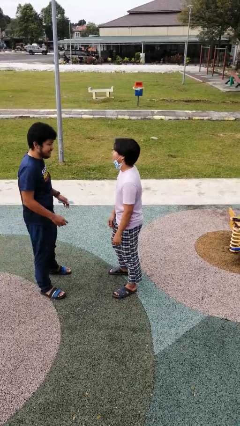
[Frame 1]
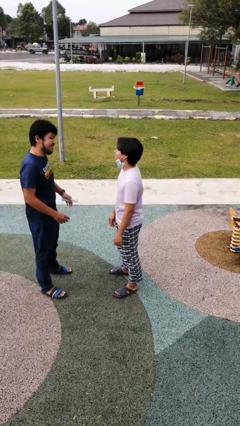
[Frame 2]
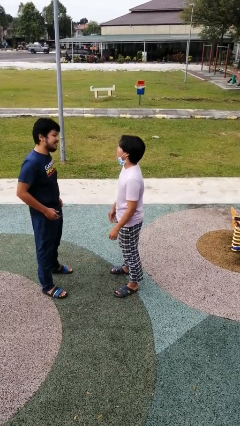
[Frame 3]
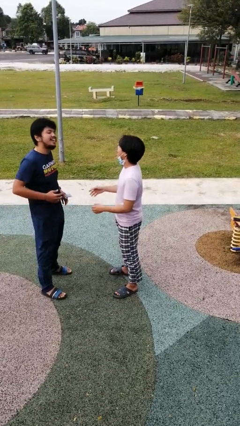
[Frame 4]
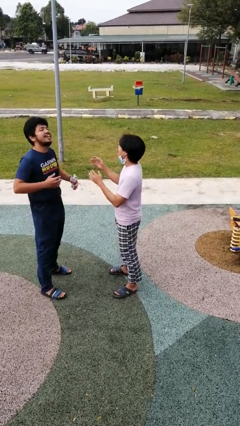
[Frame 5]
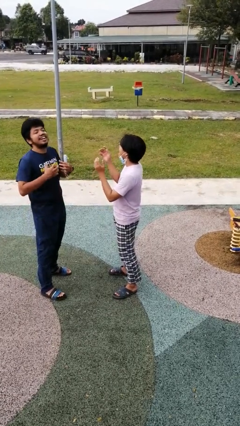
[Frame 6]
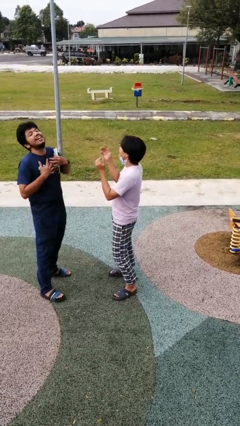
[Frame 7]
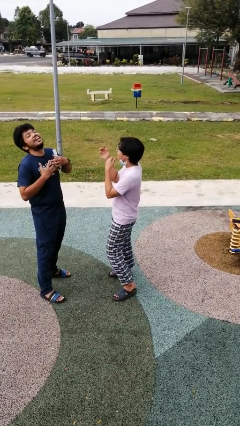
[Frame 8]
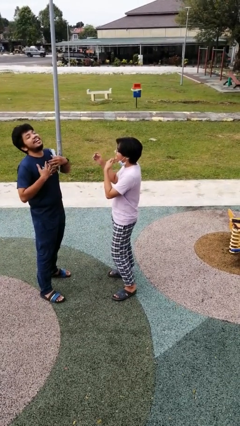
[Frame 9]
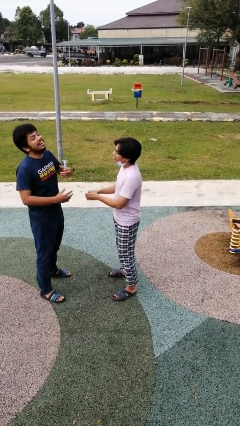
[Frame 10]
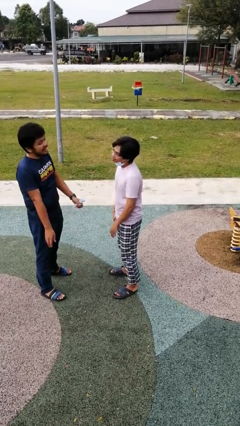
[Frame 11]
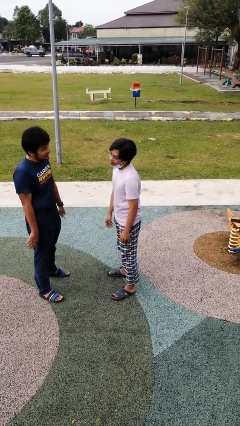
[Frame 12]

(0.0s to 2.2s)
person laughs with person

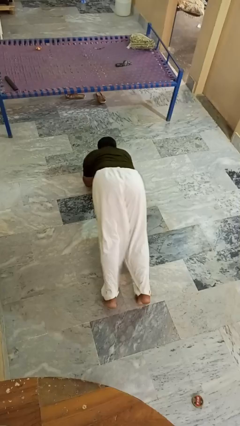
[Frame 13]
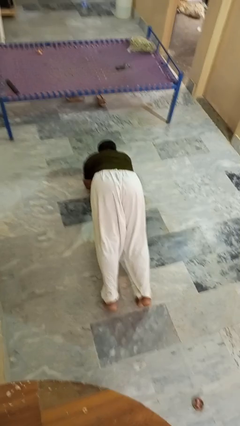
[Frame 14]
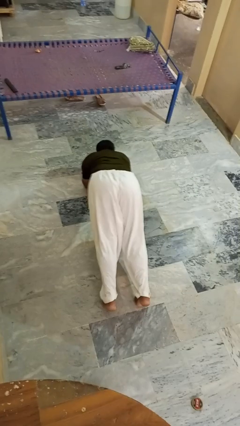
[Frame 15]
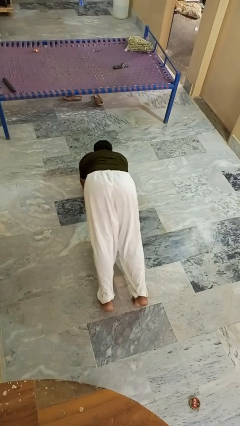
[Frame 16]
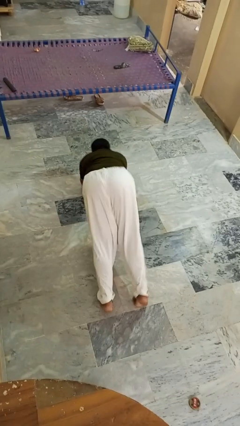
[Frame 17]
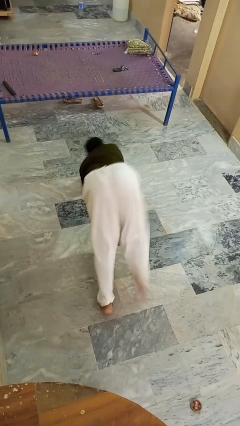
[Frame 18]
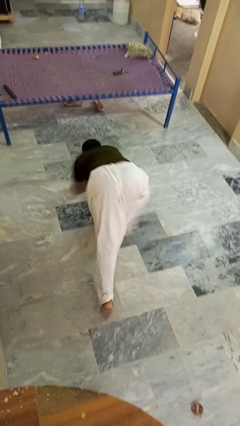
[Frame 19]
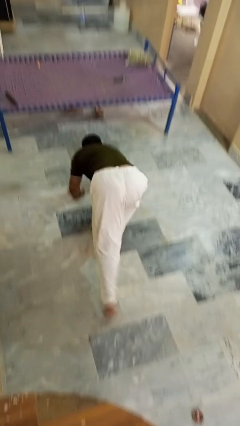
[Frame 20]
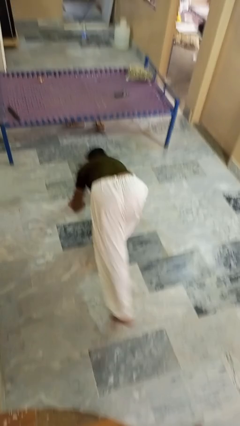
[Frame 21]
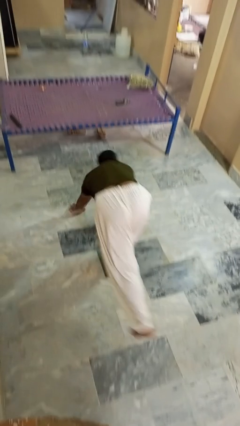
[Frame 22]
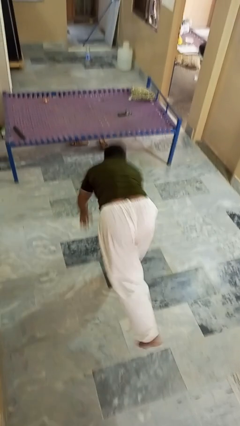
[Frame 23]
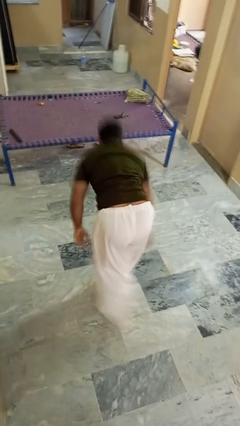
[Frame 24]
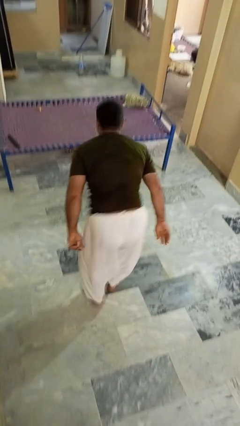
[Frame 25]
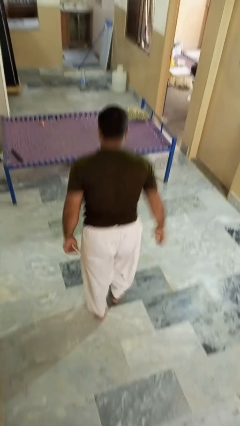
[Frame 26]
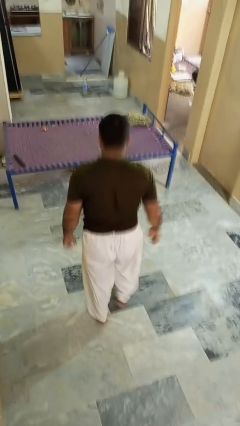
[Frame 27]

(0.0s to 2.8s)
person stands up from floor

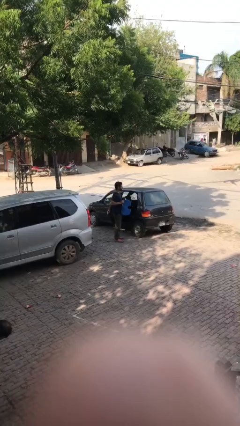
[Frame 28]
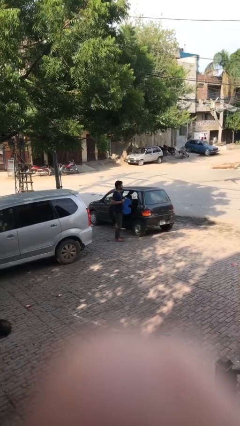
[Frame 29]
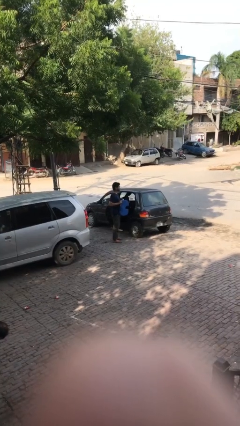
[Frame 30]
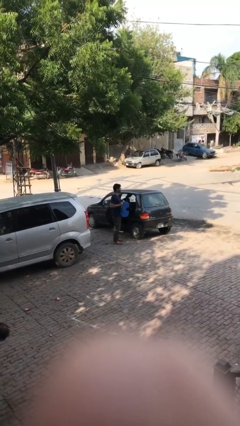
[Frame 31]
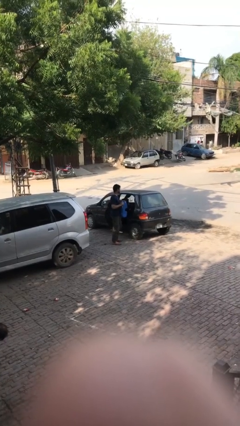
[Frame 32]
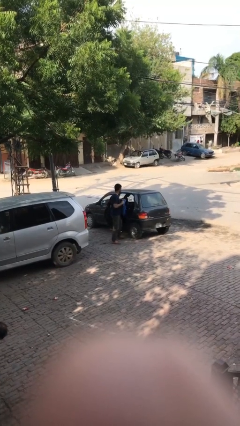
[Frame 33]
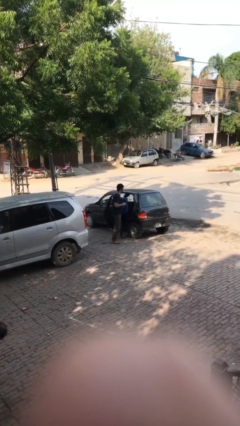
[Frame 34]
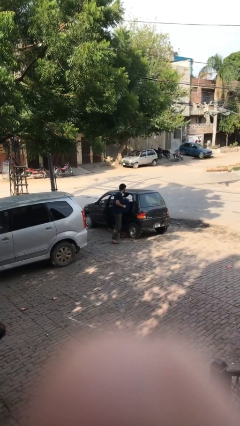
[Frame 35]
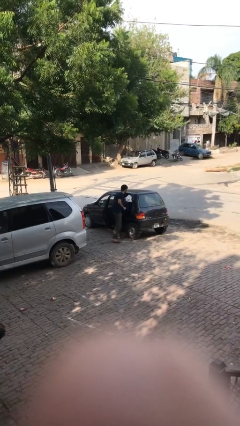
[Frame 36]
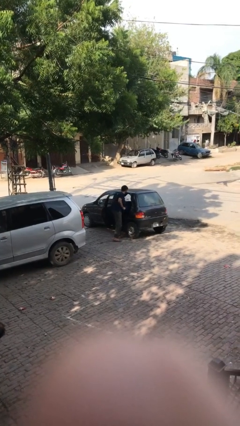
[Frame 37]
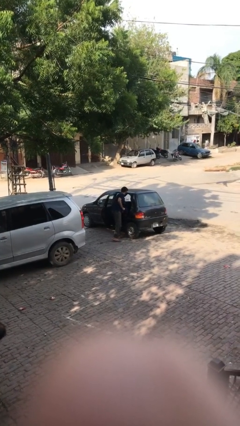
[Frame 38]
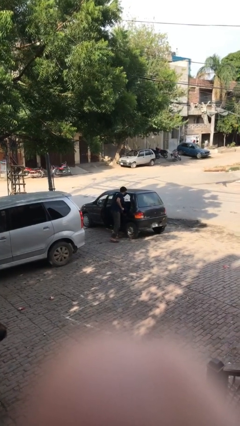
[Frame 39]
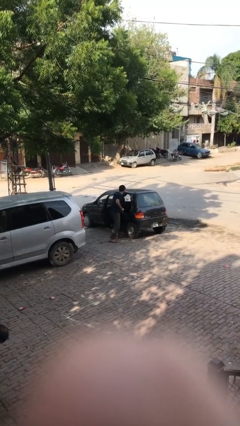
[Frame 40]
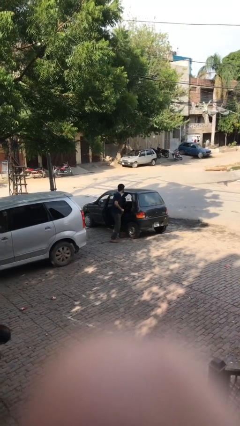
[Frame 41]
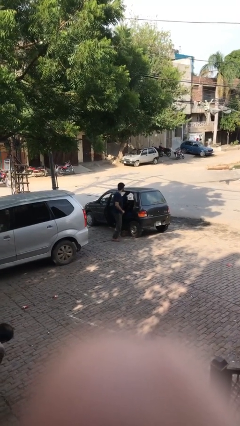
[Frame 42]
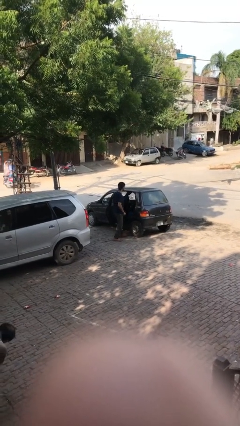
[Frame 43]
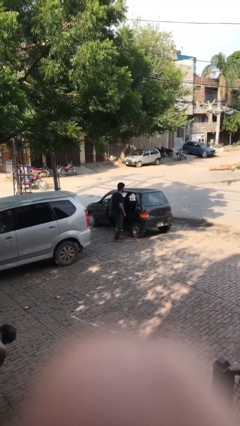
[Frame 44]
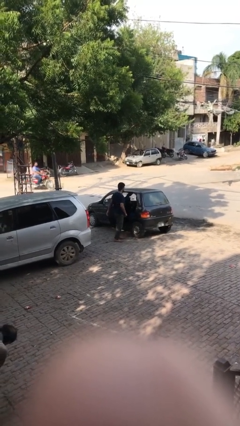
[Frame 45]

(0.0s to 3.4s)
person loads car

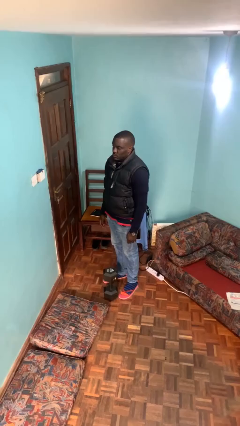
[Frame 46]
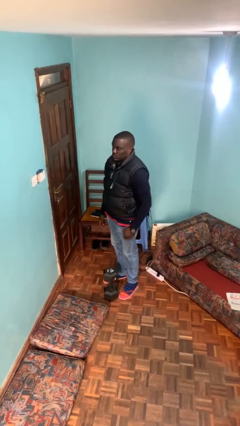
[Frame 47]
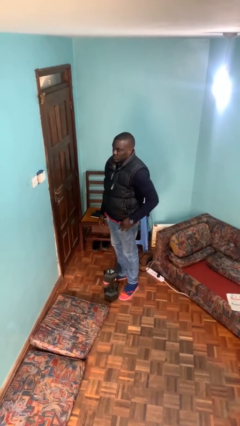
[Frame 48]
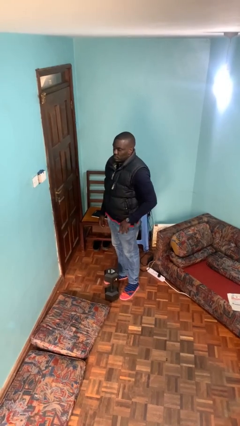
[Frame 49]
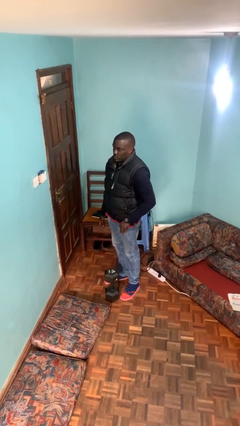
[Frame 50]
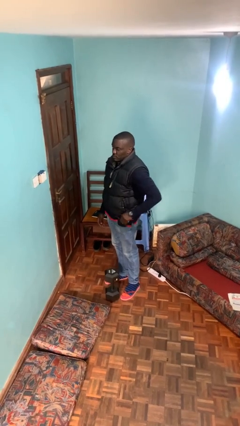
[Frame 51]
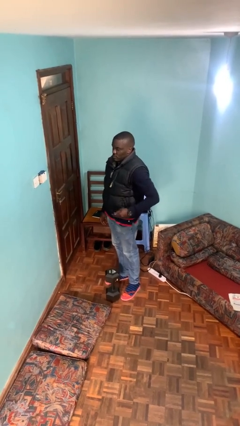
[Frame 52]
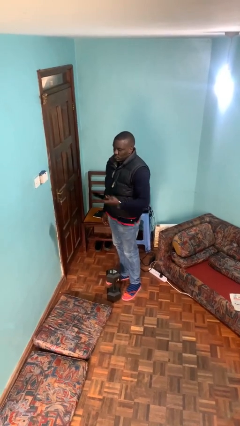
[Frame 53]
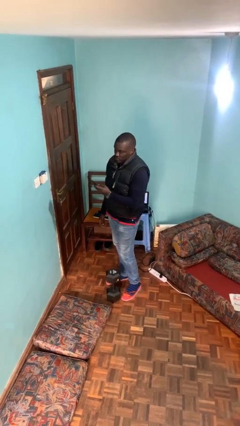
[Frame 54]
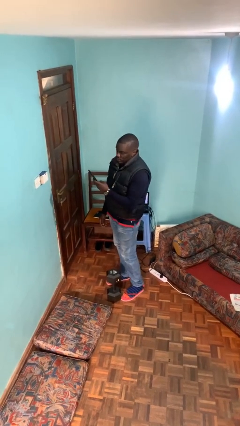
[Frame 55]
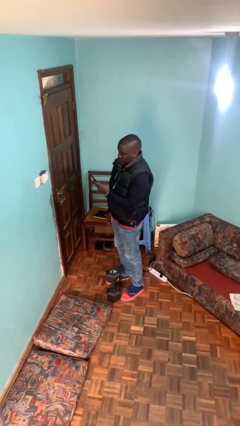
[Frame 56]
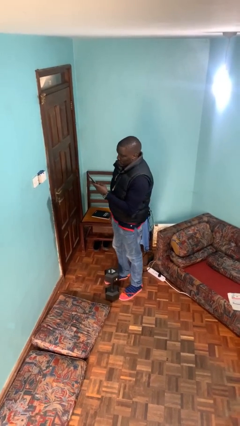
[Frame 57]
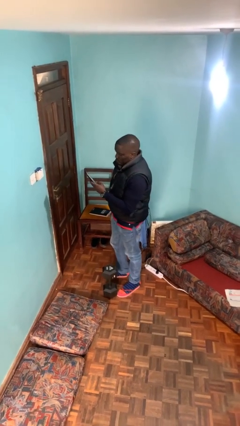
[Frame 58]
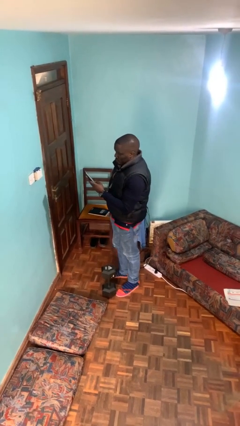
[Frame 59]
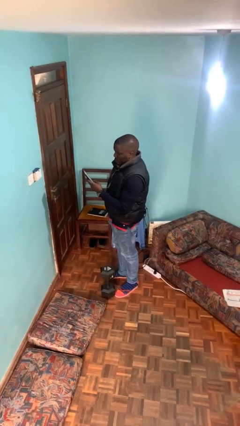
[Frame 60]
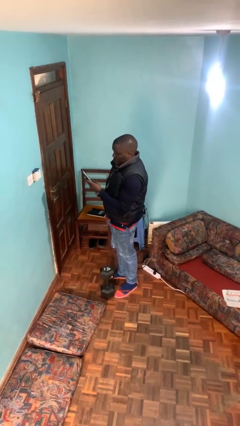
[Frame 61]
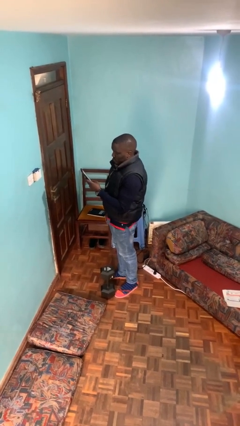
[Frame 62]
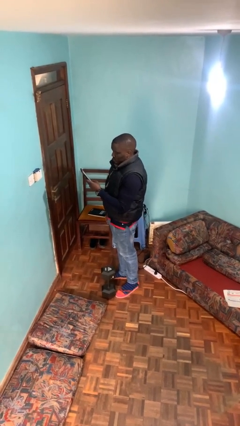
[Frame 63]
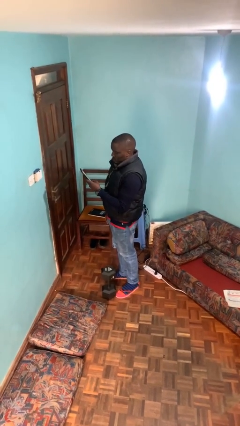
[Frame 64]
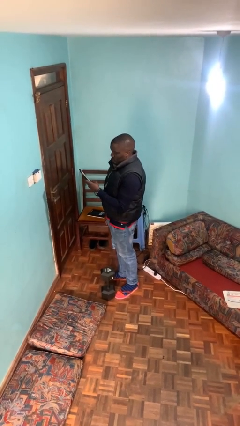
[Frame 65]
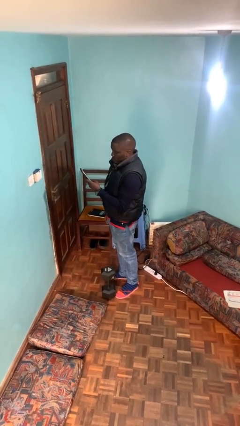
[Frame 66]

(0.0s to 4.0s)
person takes phone from pocket

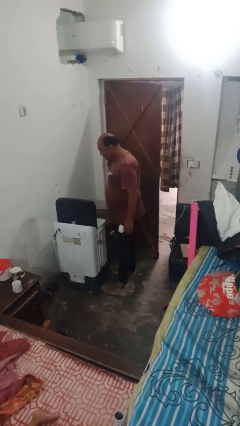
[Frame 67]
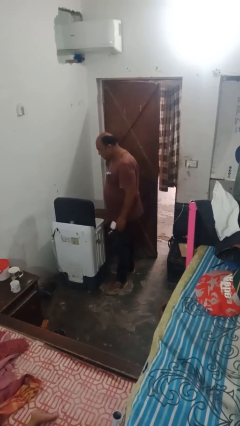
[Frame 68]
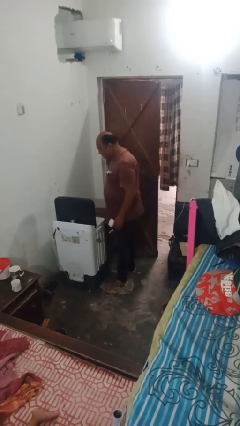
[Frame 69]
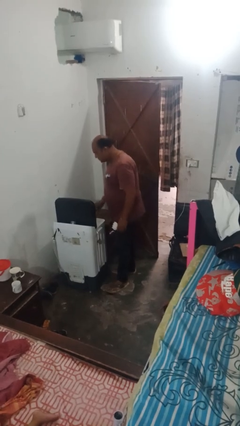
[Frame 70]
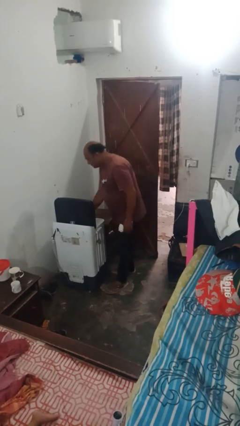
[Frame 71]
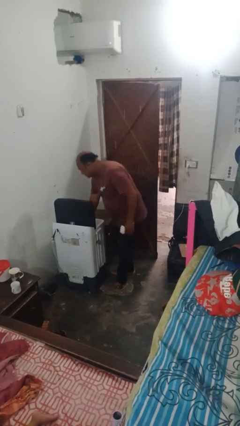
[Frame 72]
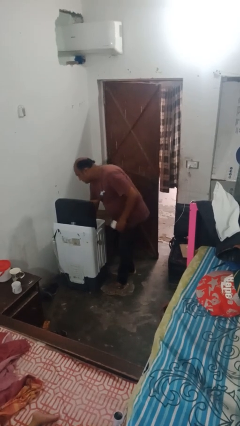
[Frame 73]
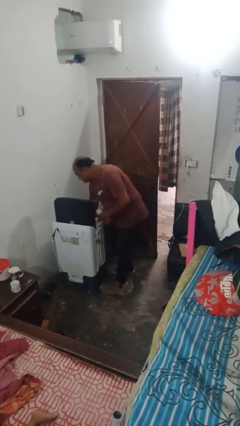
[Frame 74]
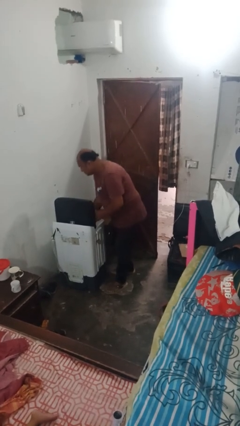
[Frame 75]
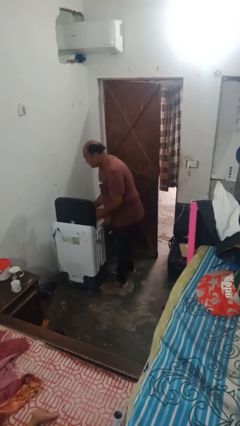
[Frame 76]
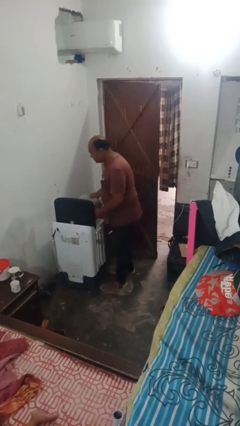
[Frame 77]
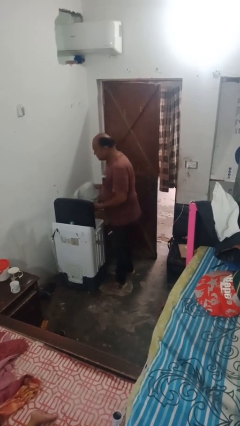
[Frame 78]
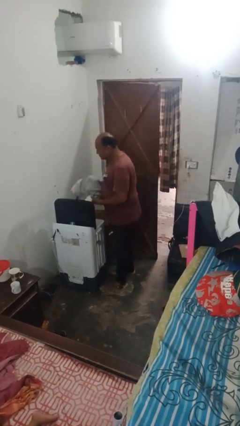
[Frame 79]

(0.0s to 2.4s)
person unloads dryer

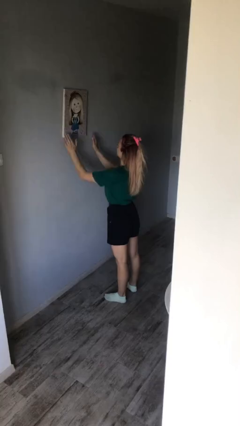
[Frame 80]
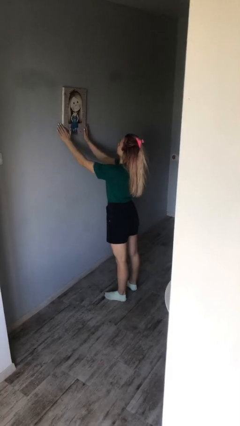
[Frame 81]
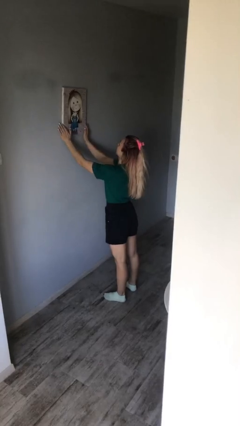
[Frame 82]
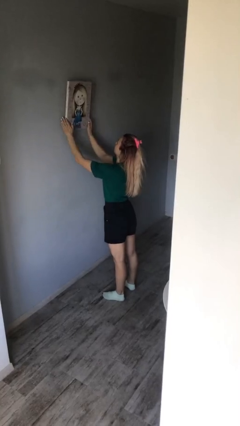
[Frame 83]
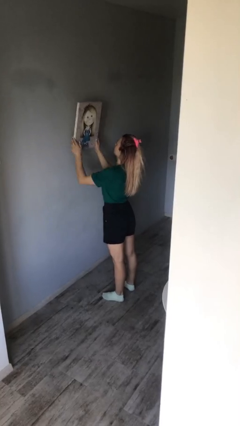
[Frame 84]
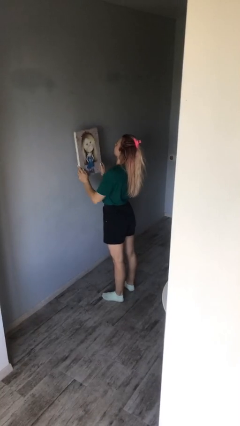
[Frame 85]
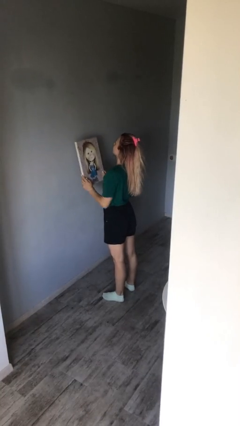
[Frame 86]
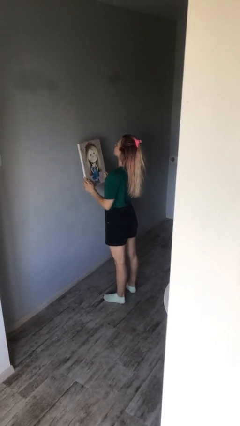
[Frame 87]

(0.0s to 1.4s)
person takes down picture frame

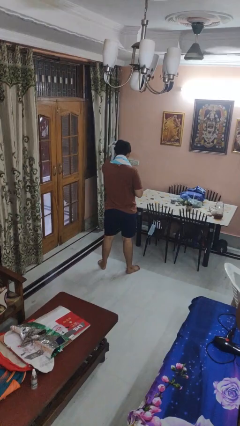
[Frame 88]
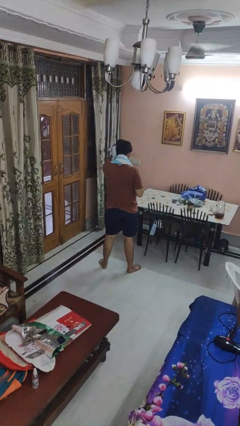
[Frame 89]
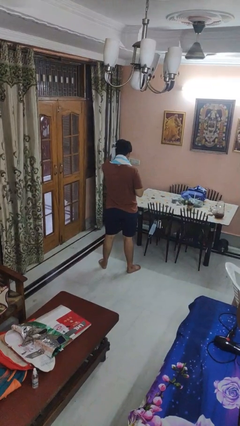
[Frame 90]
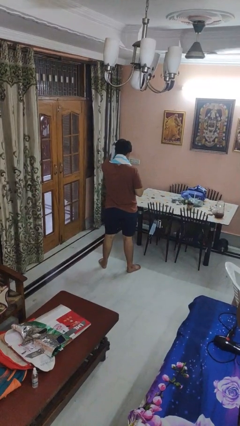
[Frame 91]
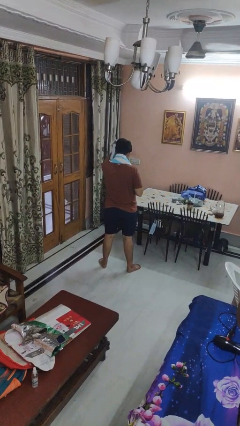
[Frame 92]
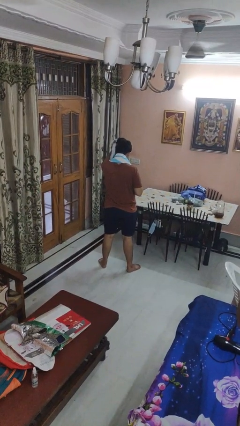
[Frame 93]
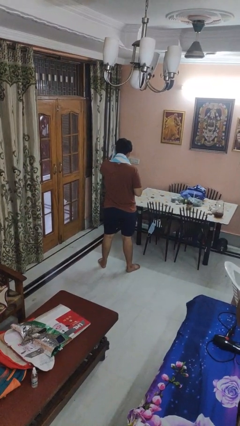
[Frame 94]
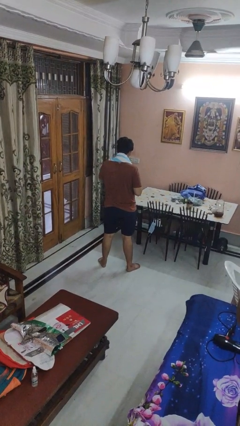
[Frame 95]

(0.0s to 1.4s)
person dries hair with towel
